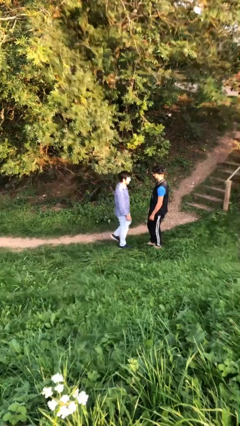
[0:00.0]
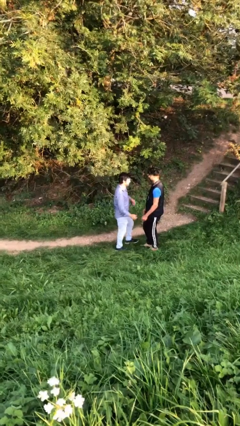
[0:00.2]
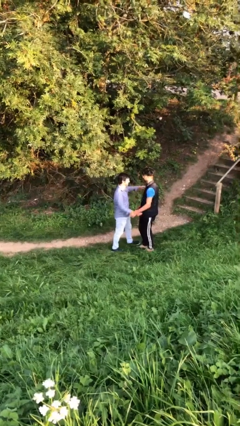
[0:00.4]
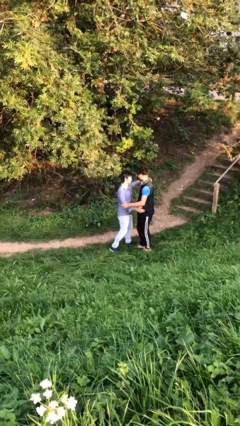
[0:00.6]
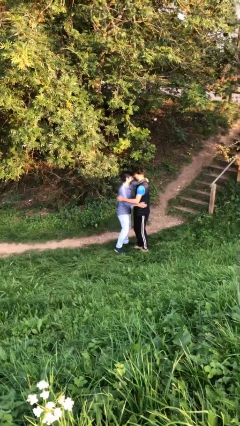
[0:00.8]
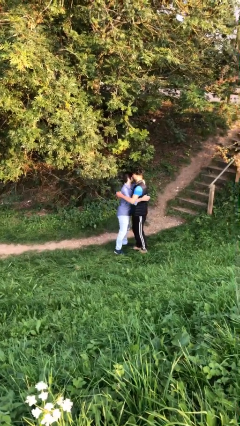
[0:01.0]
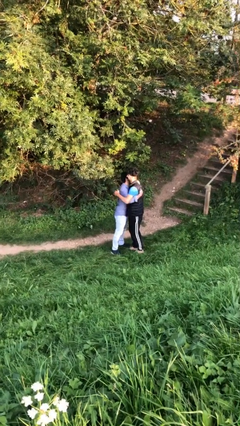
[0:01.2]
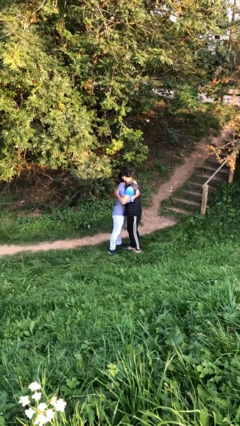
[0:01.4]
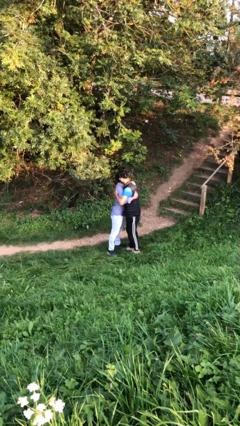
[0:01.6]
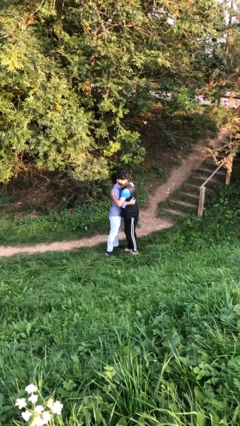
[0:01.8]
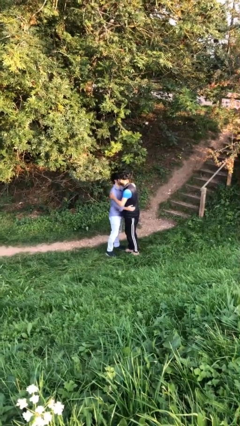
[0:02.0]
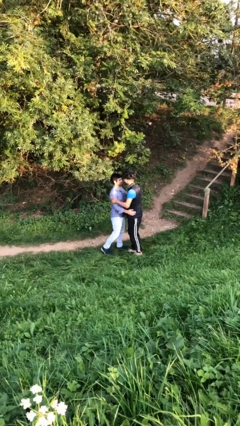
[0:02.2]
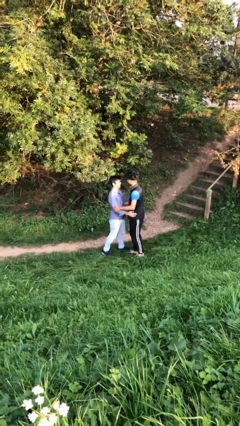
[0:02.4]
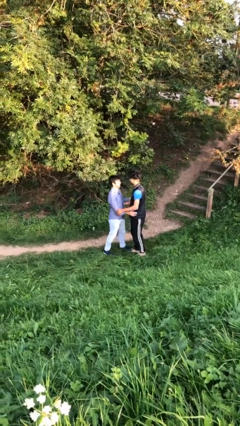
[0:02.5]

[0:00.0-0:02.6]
person embraces person

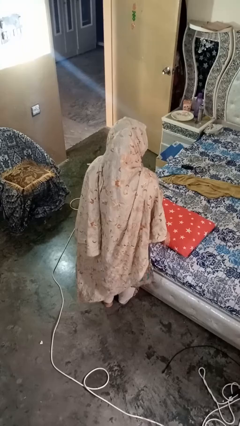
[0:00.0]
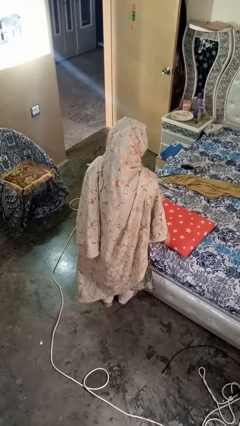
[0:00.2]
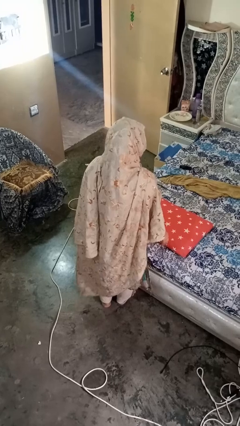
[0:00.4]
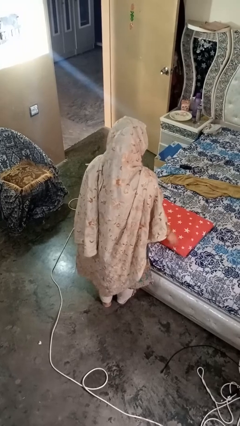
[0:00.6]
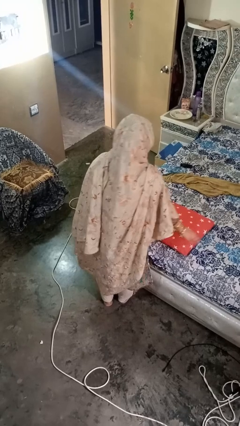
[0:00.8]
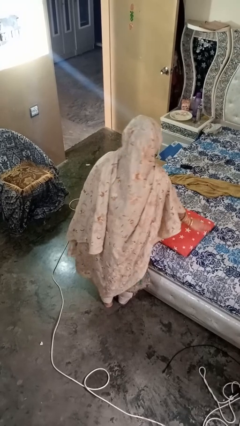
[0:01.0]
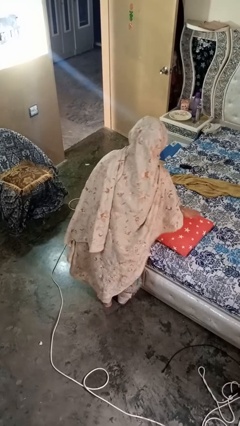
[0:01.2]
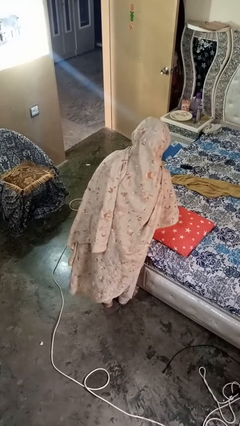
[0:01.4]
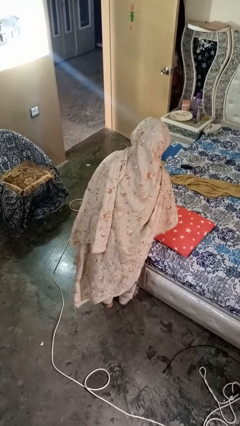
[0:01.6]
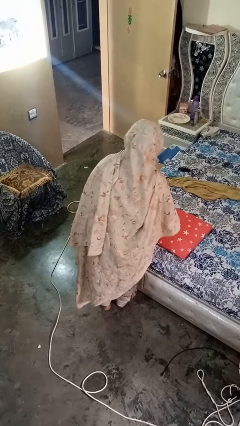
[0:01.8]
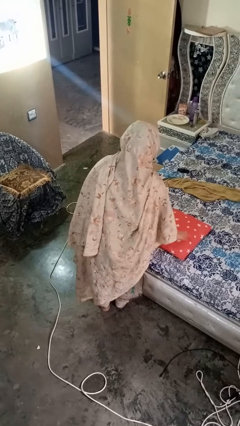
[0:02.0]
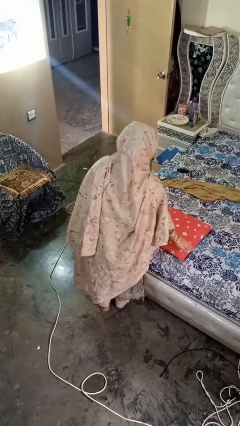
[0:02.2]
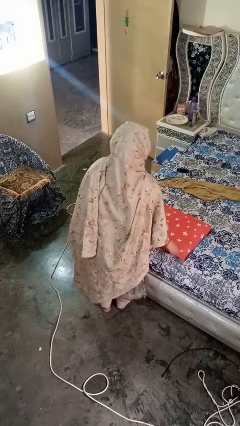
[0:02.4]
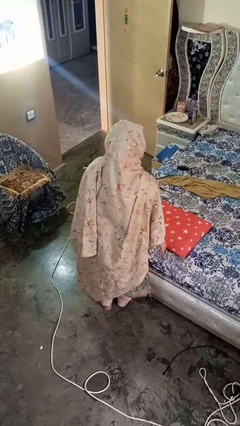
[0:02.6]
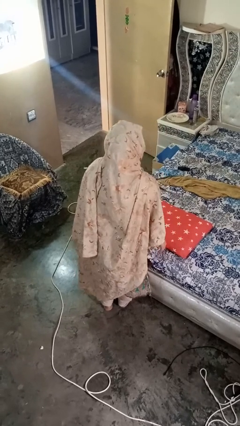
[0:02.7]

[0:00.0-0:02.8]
person waves hand over object

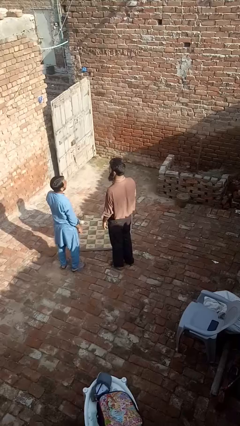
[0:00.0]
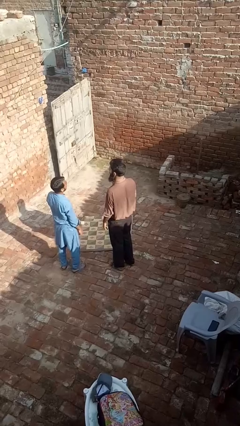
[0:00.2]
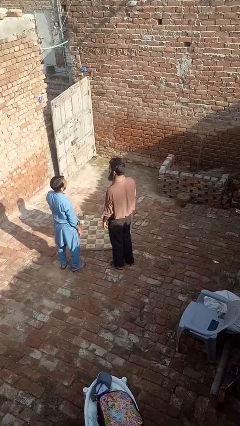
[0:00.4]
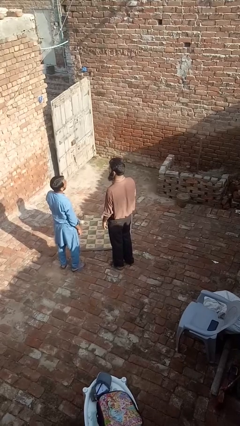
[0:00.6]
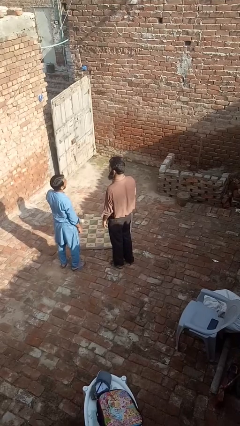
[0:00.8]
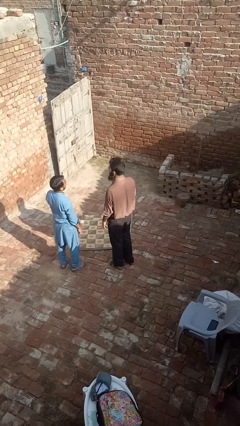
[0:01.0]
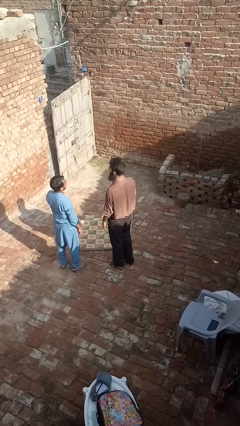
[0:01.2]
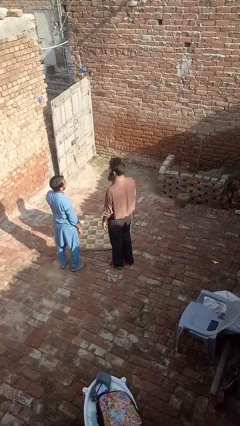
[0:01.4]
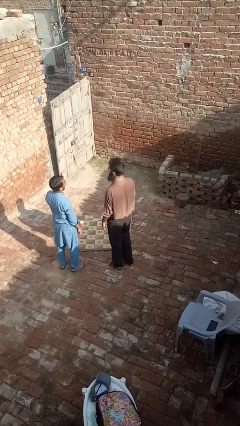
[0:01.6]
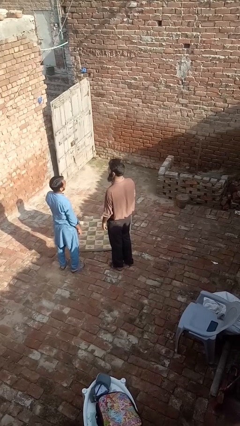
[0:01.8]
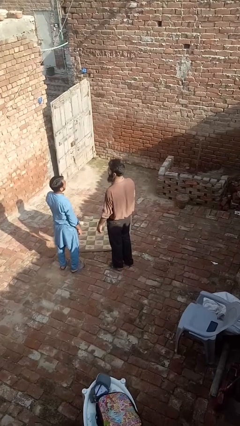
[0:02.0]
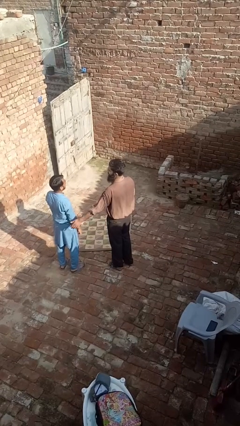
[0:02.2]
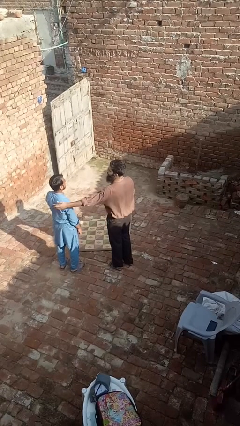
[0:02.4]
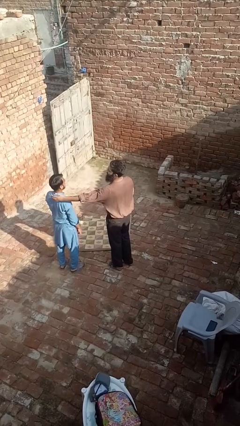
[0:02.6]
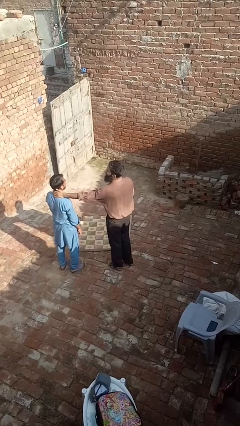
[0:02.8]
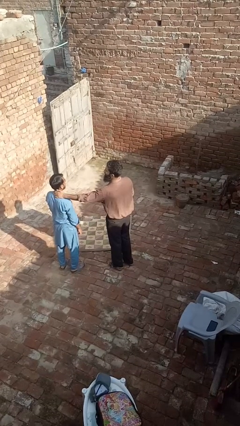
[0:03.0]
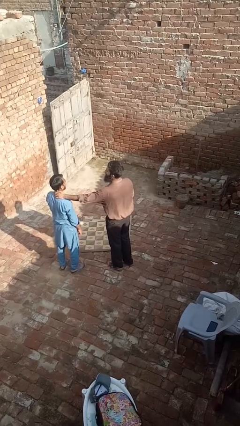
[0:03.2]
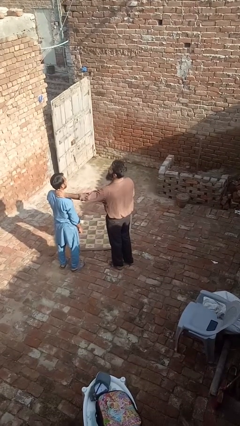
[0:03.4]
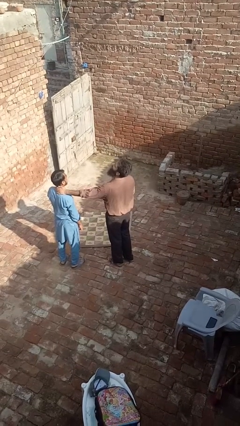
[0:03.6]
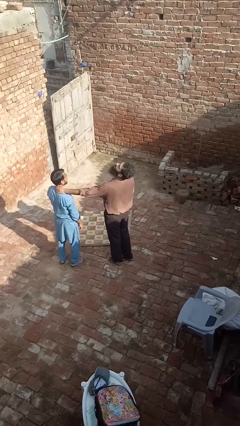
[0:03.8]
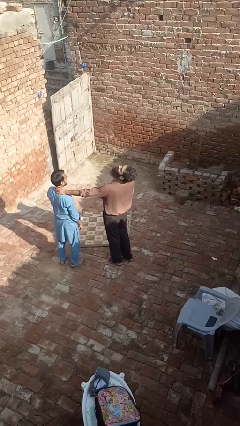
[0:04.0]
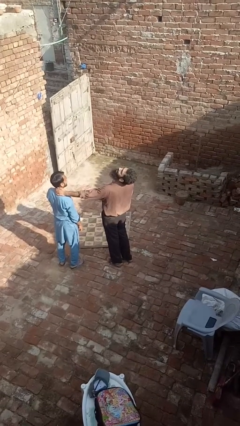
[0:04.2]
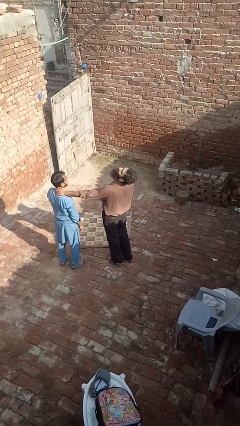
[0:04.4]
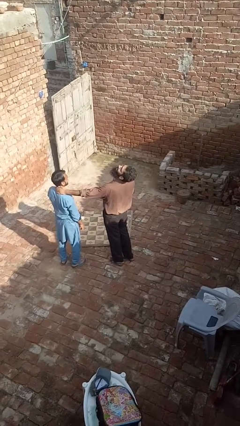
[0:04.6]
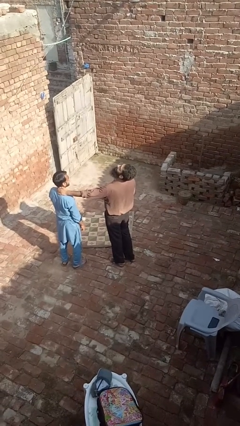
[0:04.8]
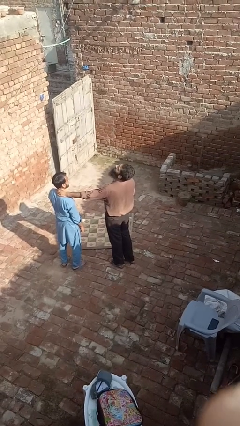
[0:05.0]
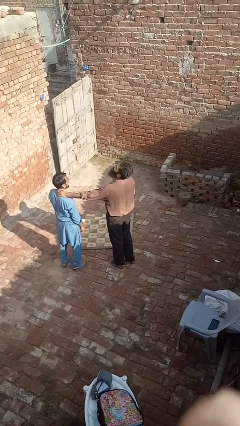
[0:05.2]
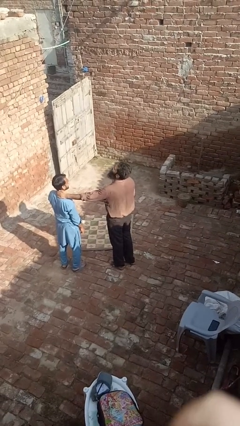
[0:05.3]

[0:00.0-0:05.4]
person laughs with person

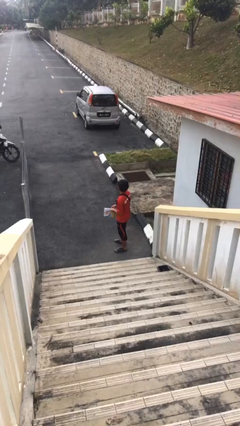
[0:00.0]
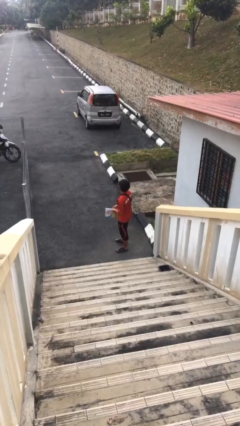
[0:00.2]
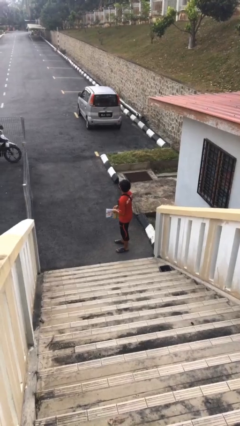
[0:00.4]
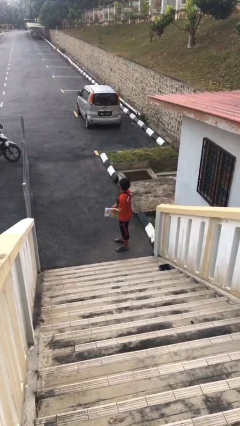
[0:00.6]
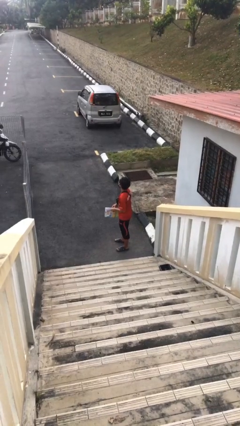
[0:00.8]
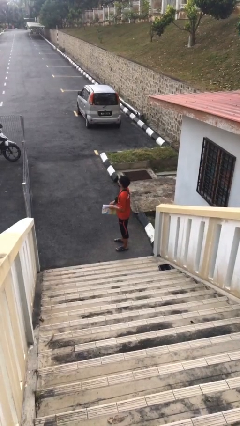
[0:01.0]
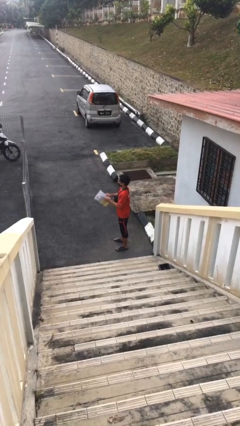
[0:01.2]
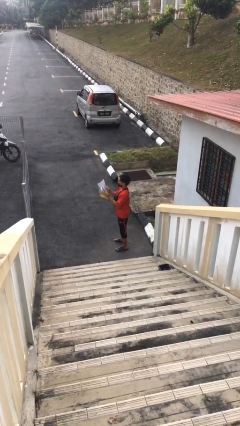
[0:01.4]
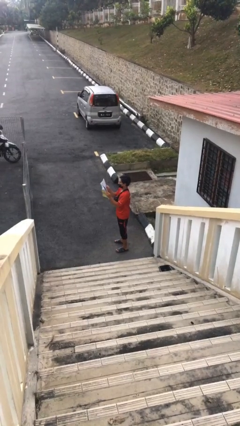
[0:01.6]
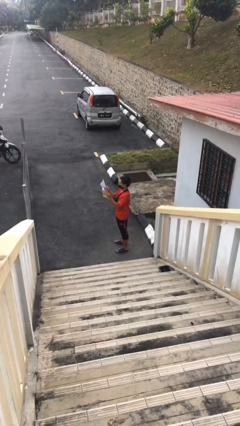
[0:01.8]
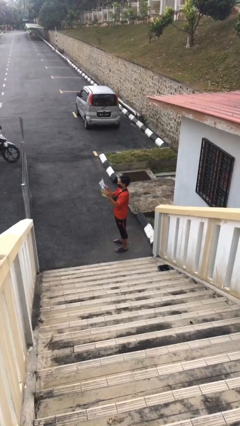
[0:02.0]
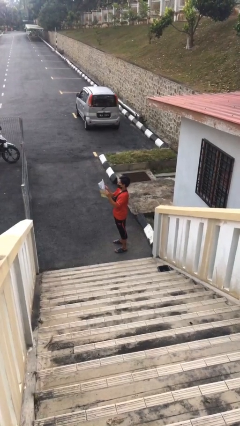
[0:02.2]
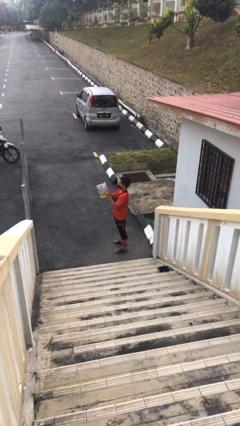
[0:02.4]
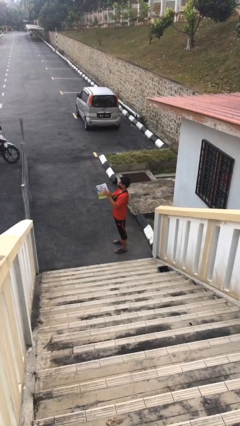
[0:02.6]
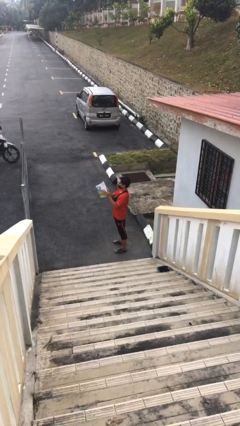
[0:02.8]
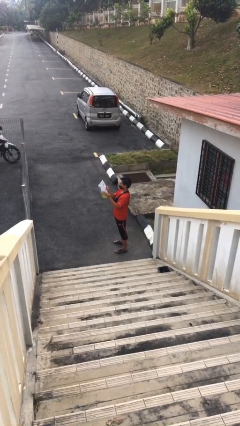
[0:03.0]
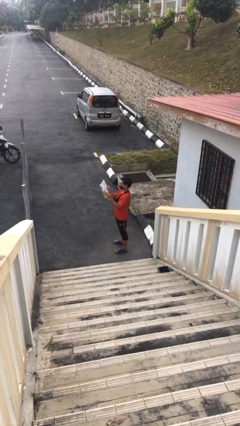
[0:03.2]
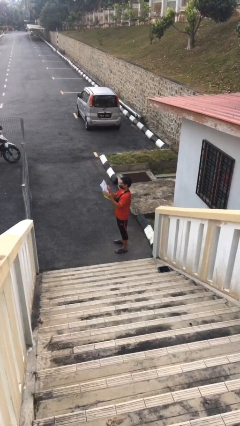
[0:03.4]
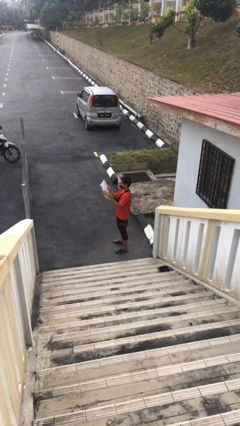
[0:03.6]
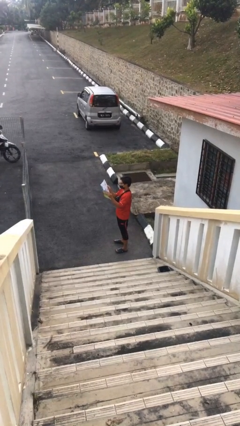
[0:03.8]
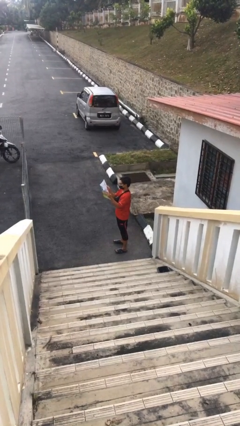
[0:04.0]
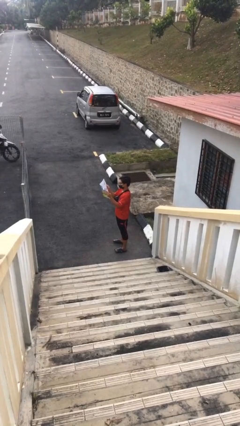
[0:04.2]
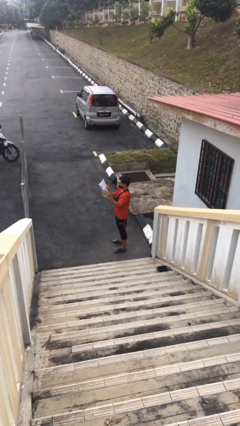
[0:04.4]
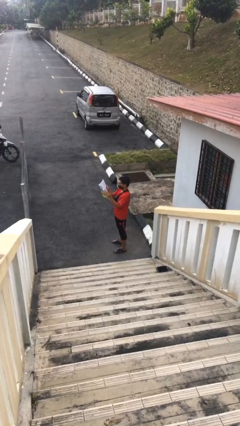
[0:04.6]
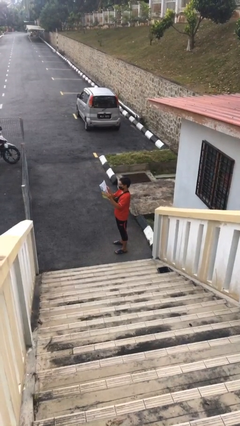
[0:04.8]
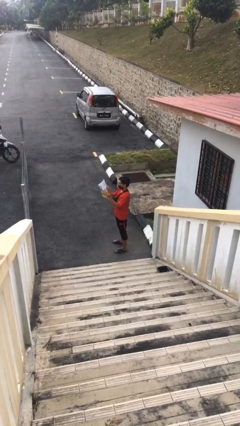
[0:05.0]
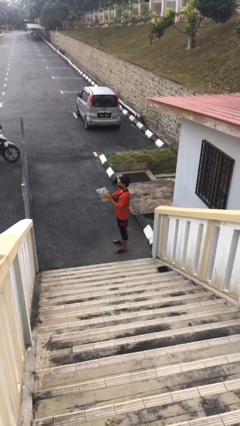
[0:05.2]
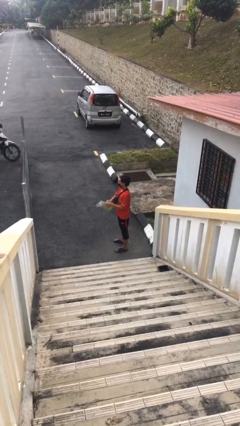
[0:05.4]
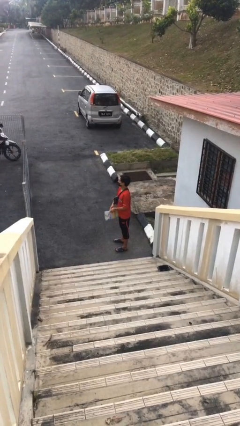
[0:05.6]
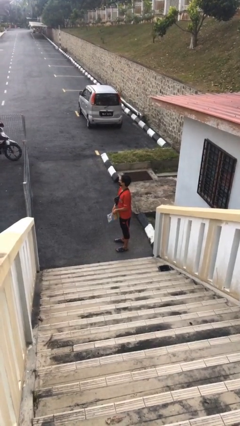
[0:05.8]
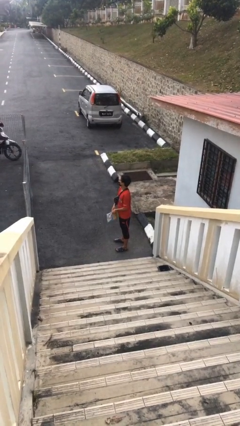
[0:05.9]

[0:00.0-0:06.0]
person reads document

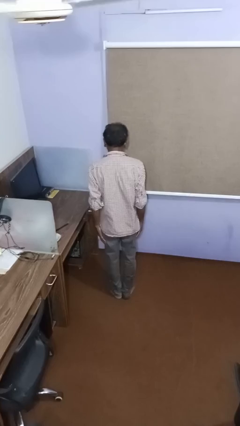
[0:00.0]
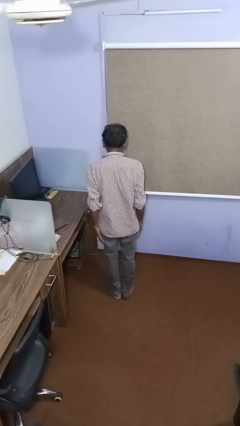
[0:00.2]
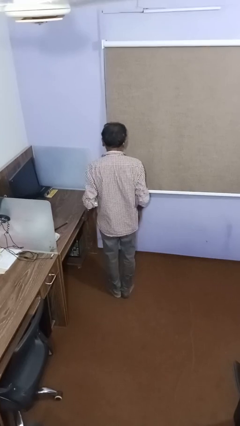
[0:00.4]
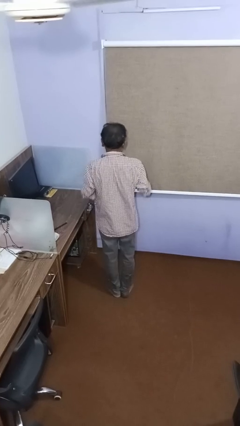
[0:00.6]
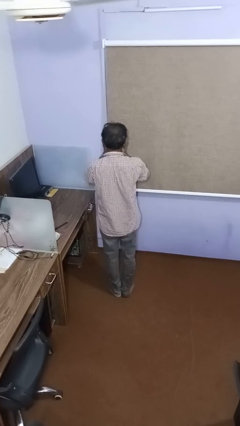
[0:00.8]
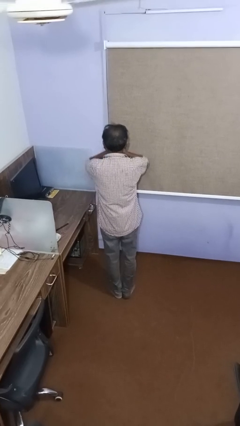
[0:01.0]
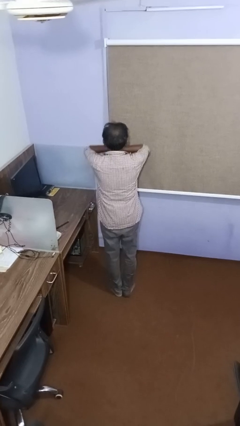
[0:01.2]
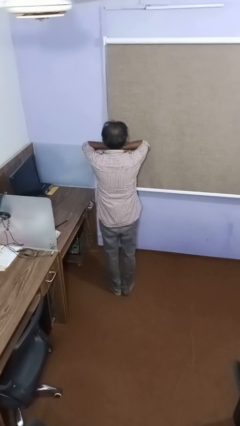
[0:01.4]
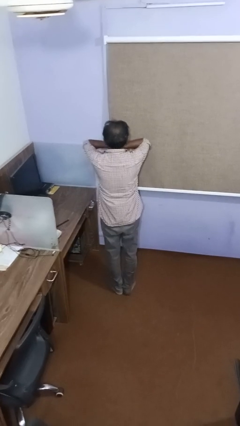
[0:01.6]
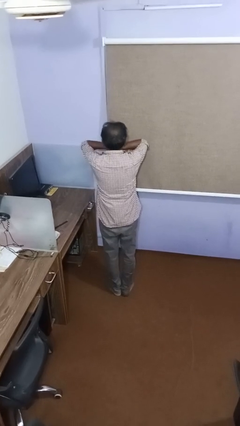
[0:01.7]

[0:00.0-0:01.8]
person covers face with hands
